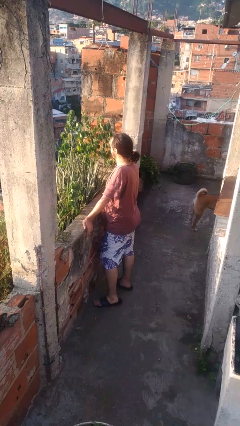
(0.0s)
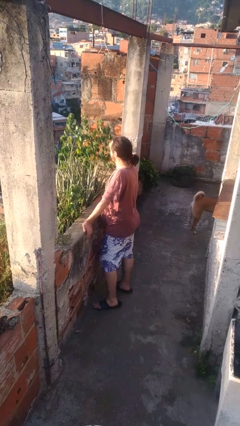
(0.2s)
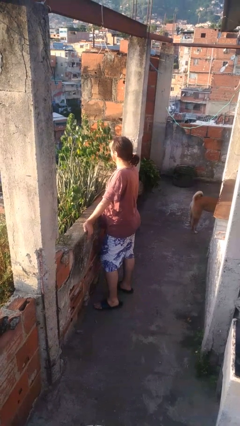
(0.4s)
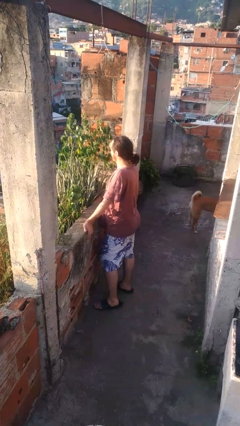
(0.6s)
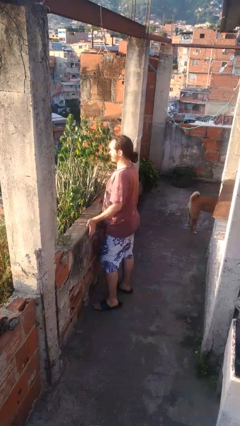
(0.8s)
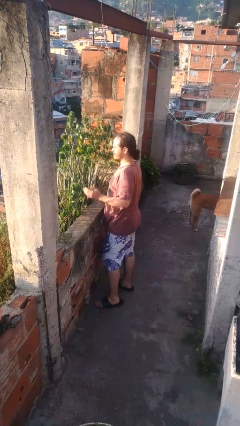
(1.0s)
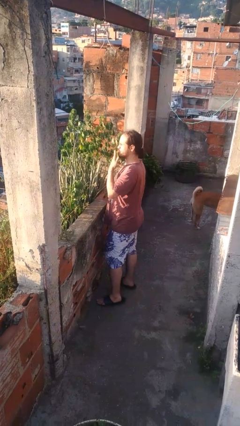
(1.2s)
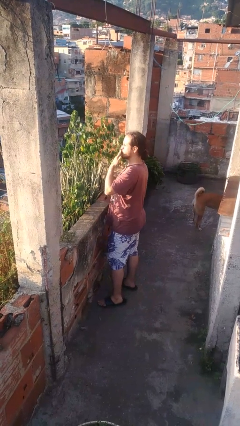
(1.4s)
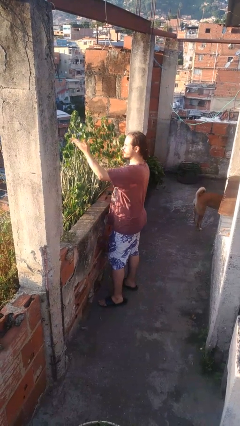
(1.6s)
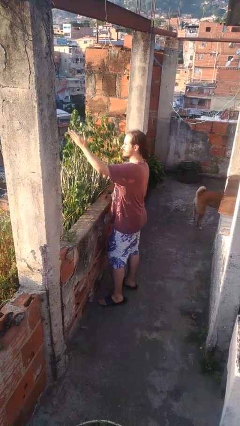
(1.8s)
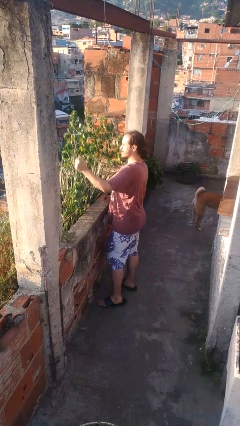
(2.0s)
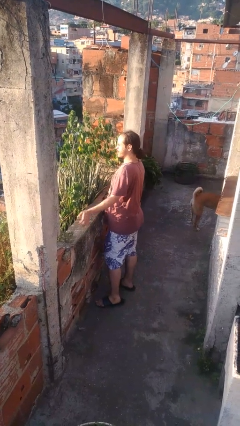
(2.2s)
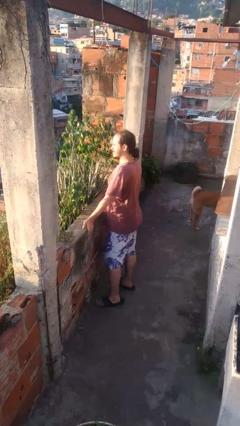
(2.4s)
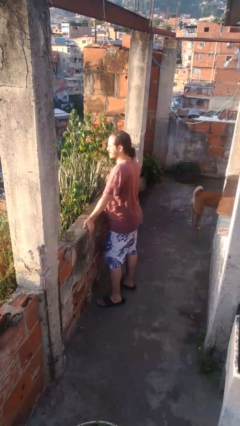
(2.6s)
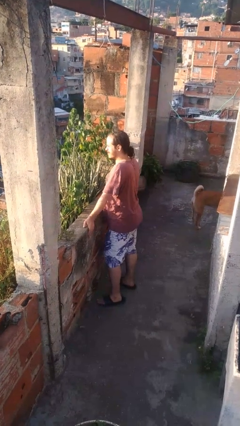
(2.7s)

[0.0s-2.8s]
person gestures blow kiss

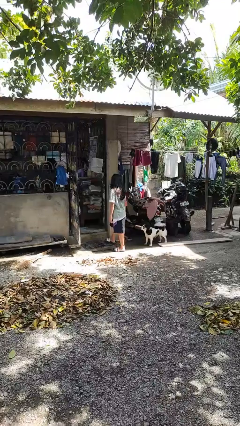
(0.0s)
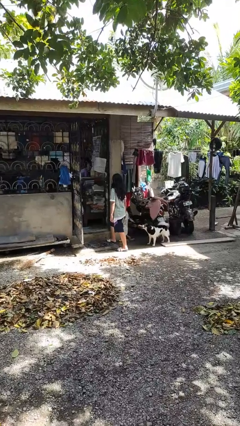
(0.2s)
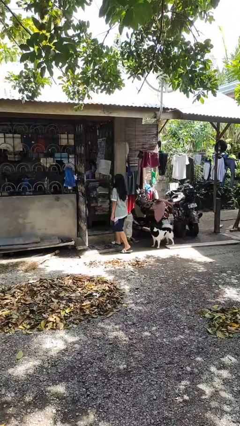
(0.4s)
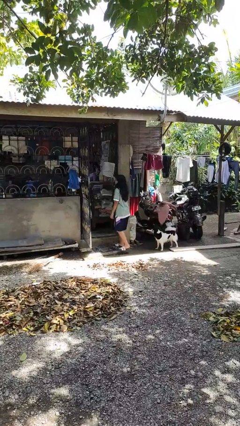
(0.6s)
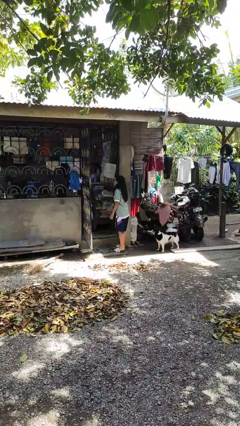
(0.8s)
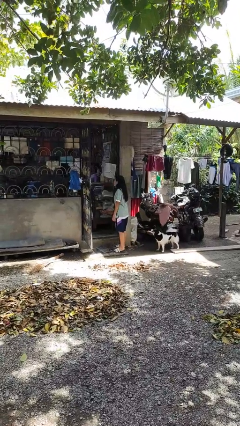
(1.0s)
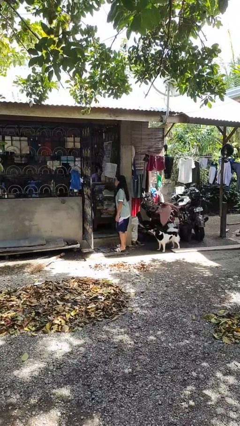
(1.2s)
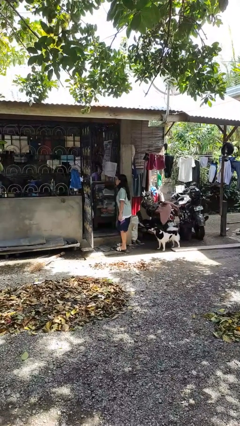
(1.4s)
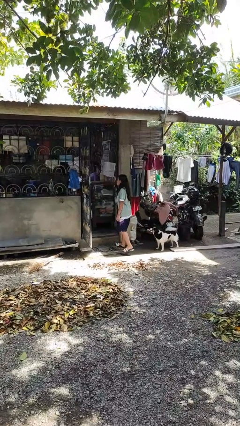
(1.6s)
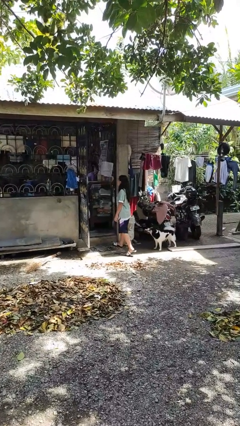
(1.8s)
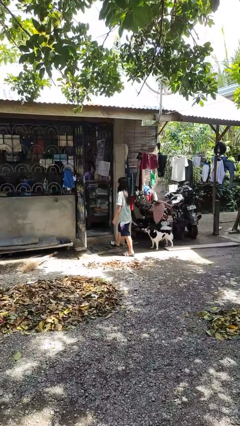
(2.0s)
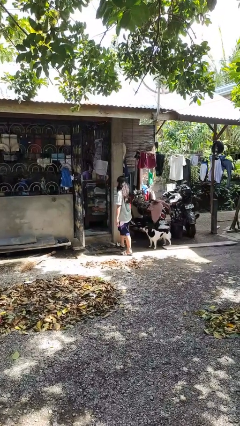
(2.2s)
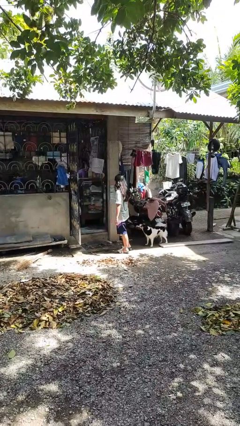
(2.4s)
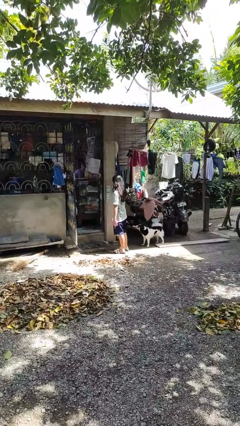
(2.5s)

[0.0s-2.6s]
person bumps into wall

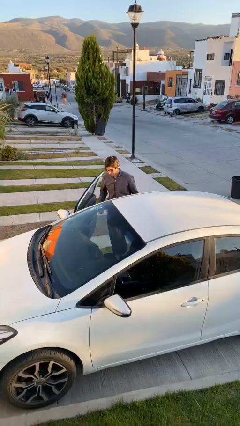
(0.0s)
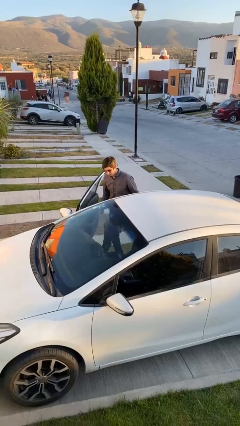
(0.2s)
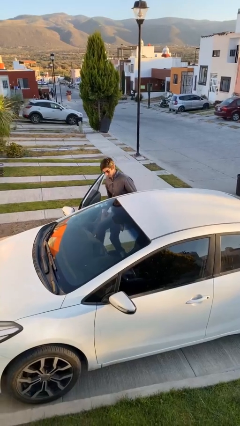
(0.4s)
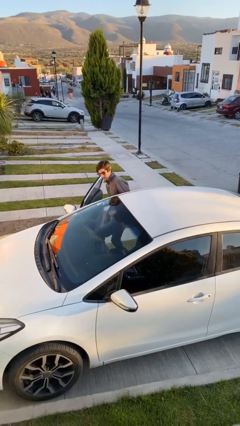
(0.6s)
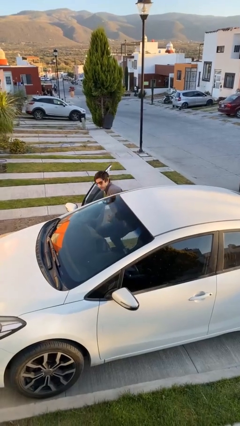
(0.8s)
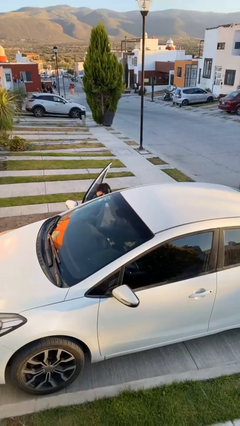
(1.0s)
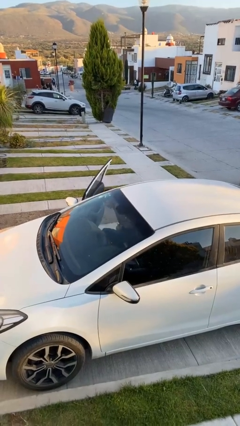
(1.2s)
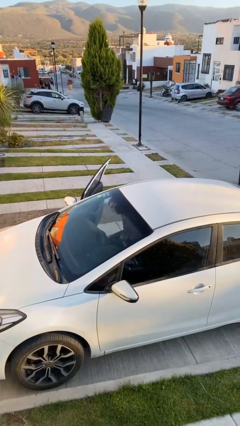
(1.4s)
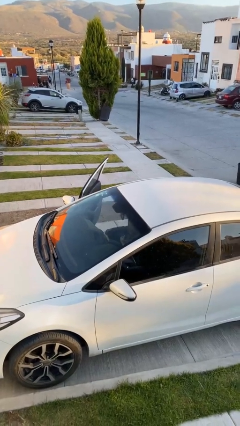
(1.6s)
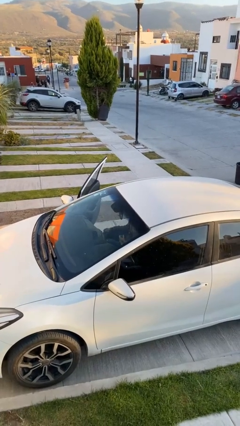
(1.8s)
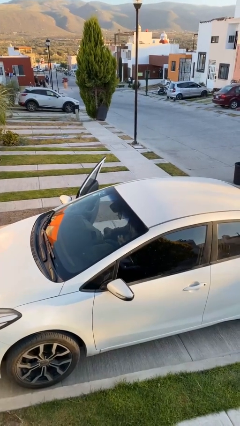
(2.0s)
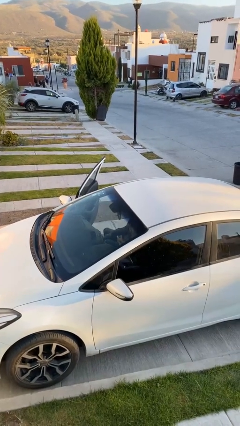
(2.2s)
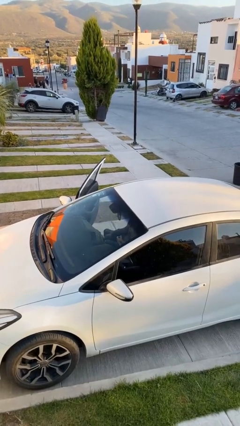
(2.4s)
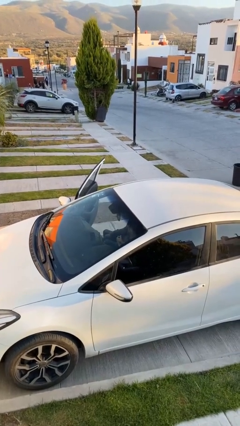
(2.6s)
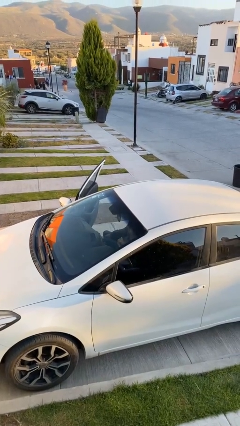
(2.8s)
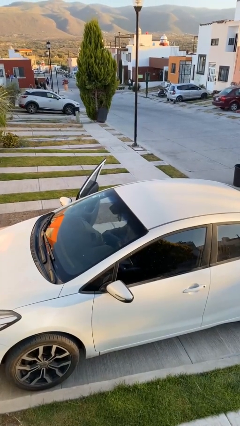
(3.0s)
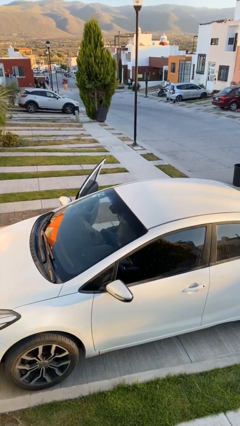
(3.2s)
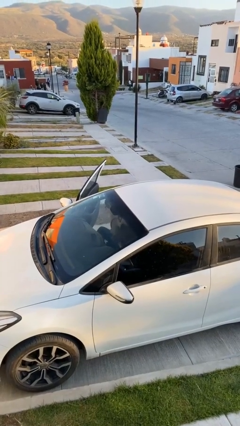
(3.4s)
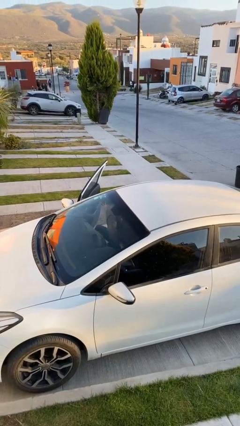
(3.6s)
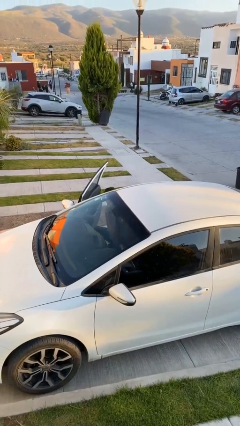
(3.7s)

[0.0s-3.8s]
person enters car

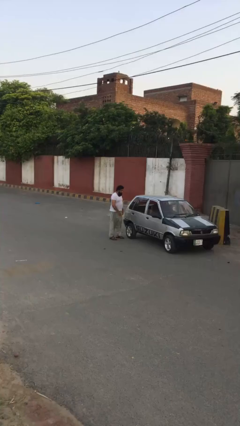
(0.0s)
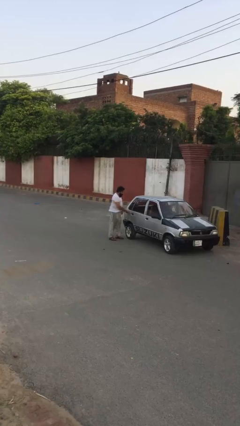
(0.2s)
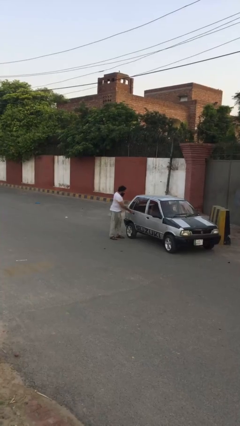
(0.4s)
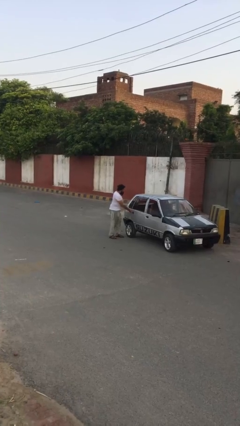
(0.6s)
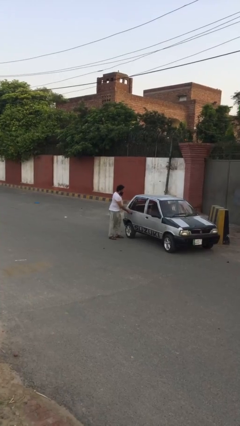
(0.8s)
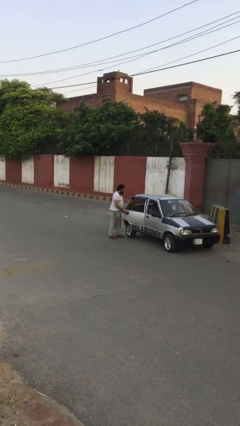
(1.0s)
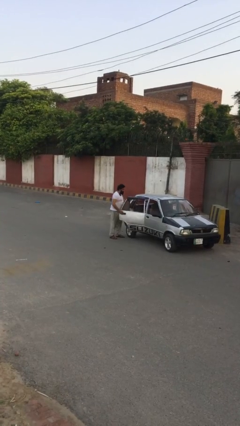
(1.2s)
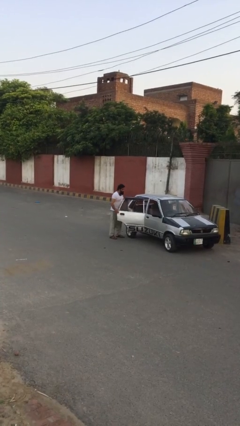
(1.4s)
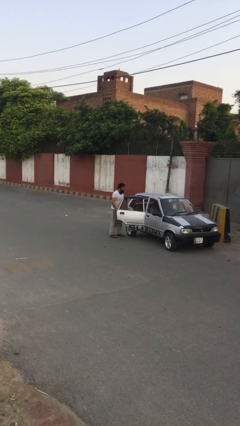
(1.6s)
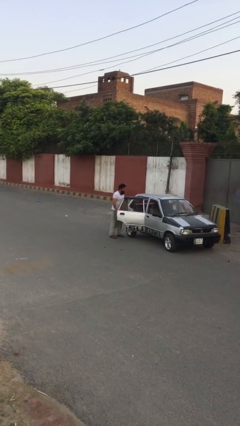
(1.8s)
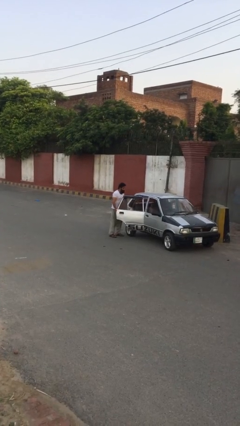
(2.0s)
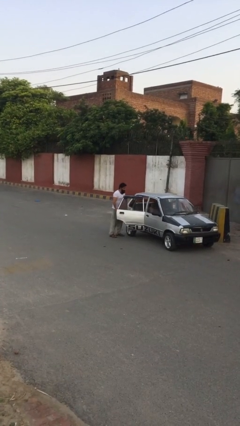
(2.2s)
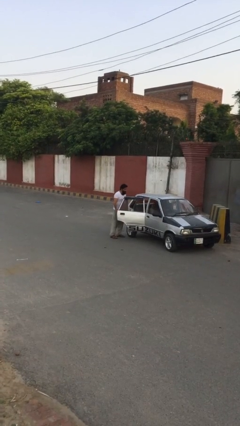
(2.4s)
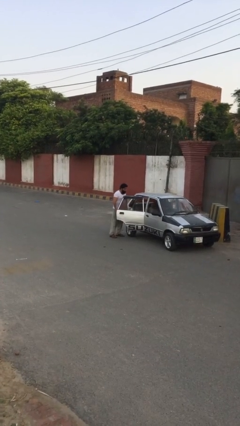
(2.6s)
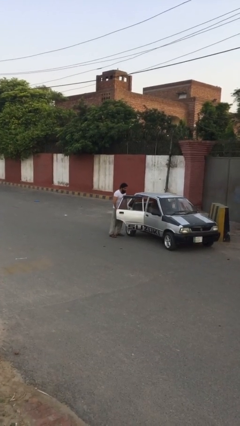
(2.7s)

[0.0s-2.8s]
person opens car door

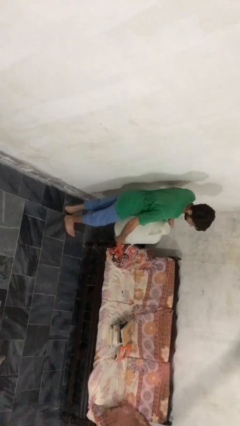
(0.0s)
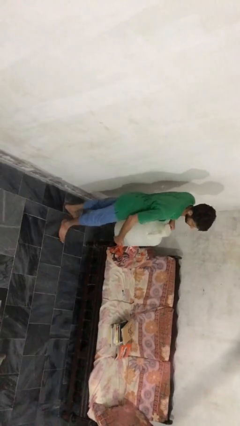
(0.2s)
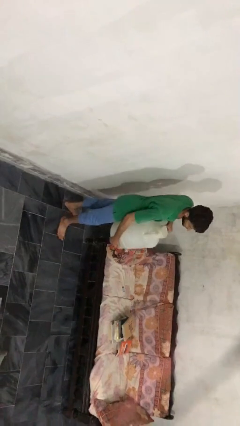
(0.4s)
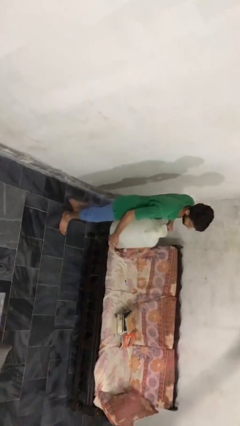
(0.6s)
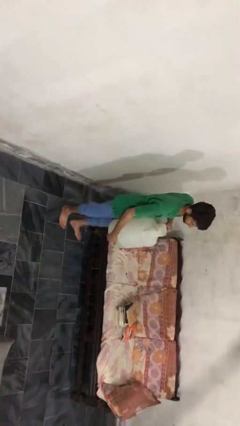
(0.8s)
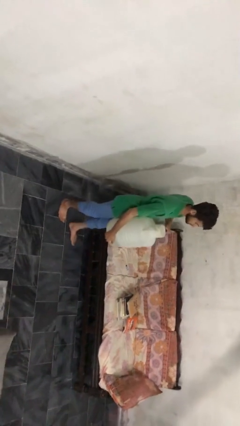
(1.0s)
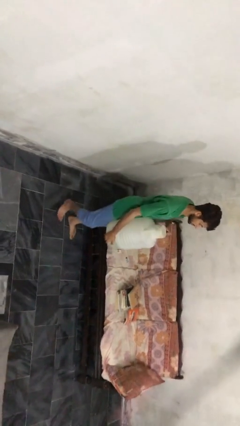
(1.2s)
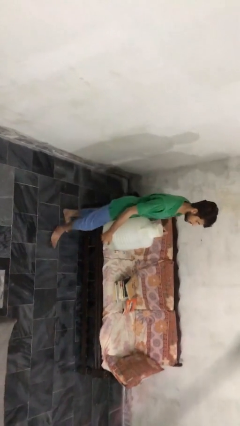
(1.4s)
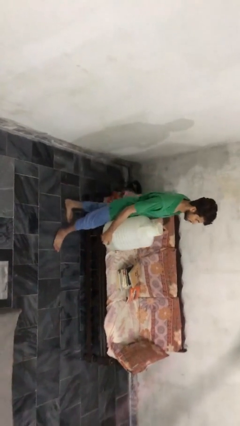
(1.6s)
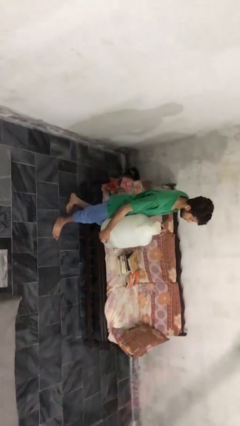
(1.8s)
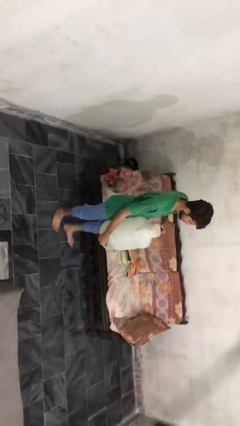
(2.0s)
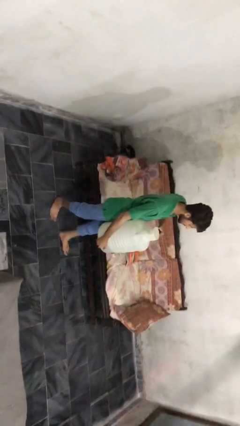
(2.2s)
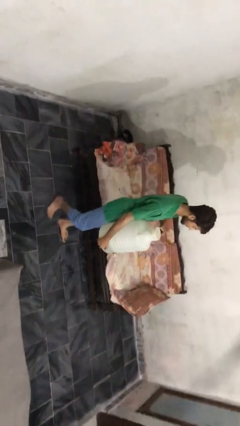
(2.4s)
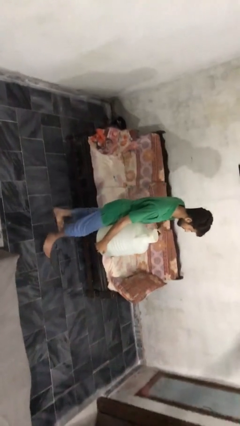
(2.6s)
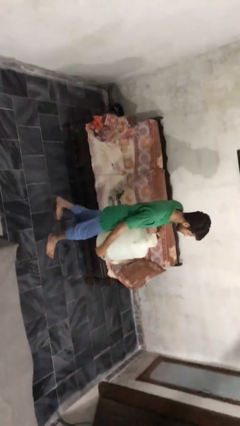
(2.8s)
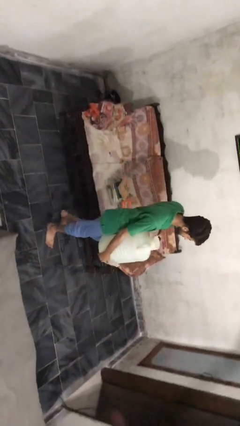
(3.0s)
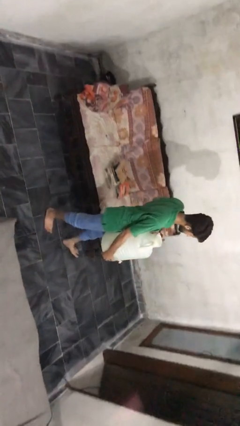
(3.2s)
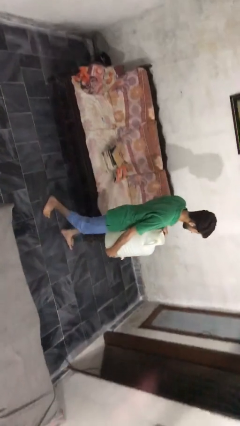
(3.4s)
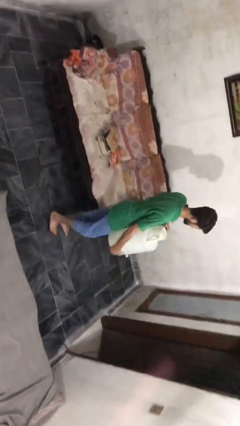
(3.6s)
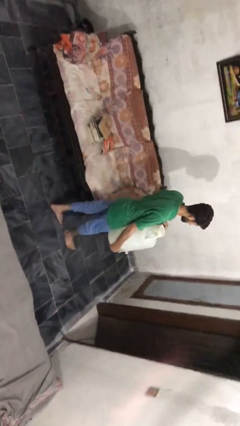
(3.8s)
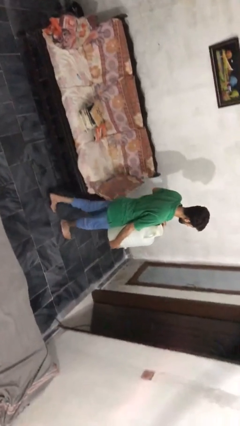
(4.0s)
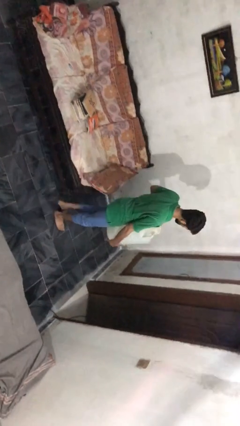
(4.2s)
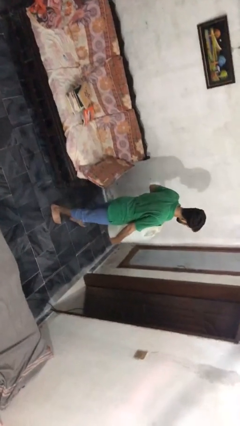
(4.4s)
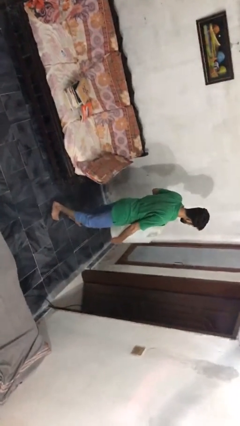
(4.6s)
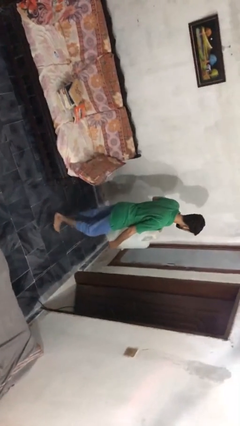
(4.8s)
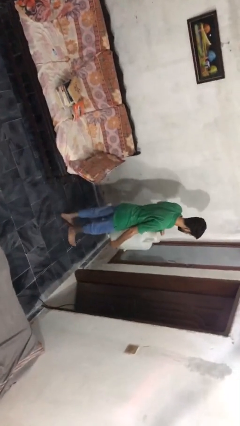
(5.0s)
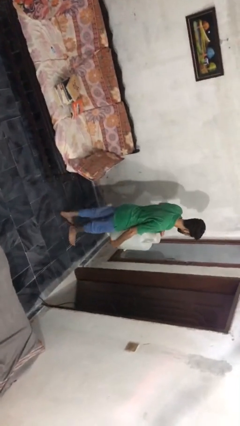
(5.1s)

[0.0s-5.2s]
person carries heavy object

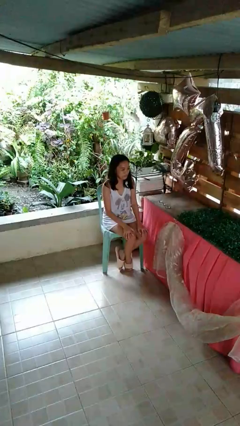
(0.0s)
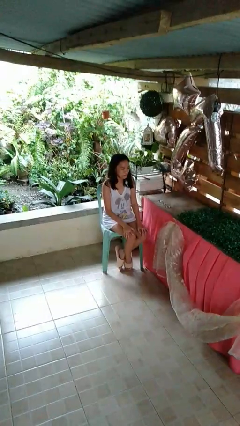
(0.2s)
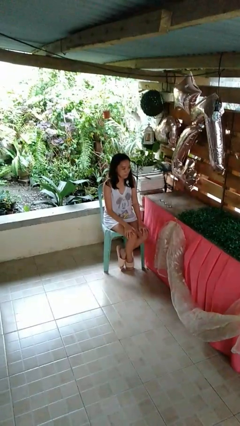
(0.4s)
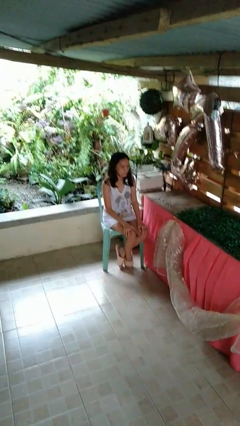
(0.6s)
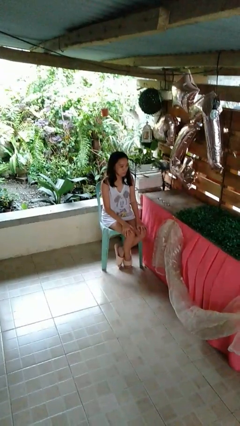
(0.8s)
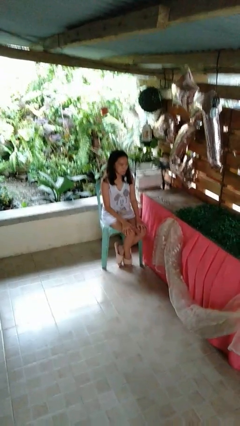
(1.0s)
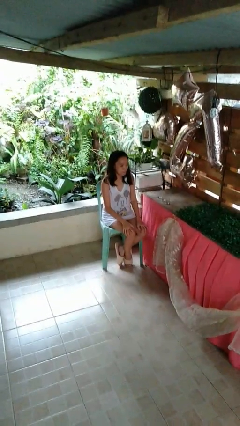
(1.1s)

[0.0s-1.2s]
person picks up object from table
